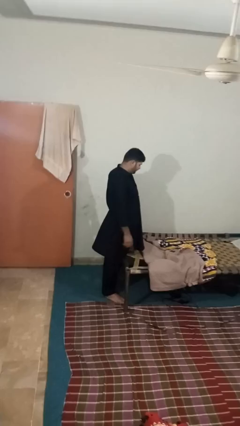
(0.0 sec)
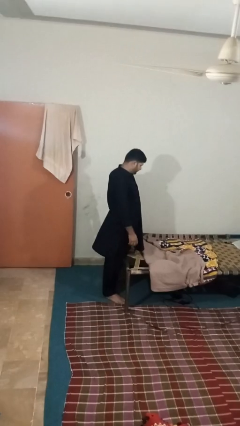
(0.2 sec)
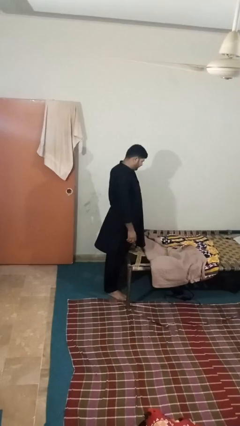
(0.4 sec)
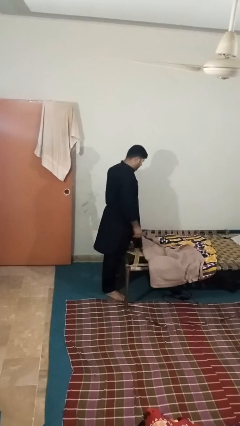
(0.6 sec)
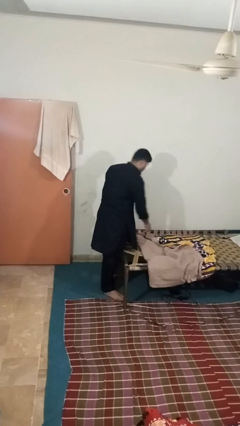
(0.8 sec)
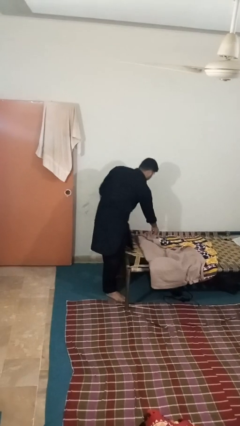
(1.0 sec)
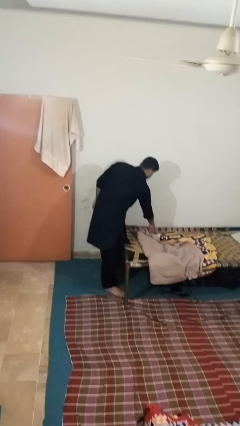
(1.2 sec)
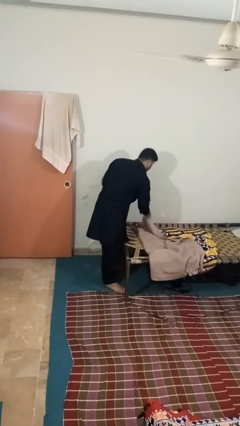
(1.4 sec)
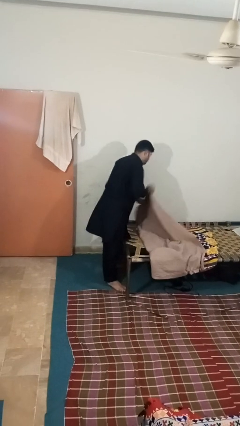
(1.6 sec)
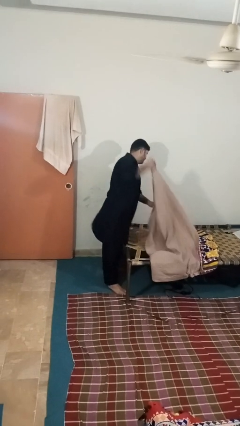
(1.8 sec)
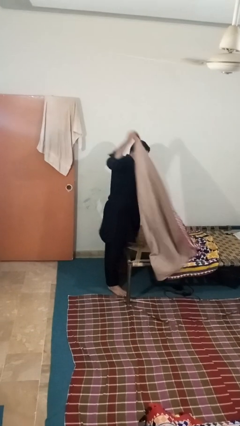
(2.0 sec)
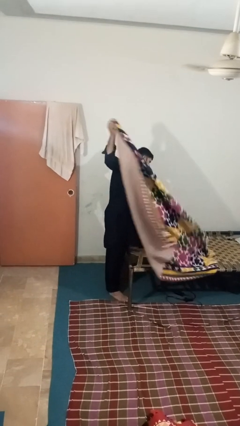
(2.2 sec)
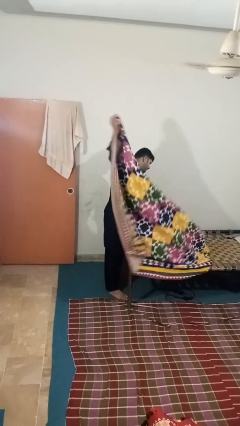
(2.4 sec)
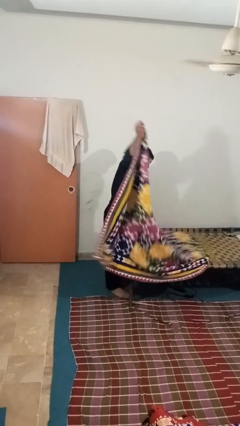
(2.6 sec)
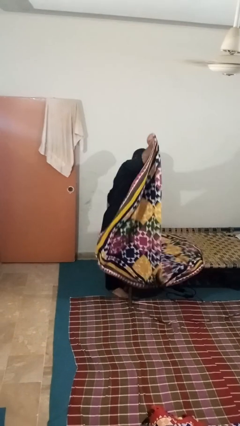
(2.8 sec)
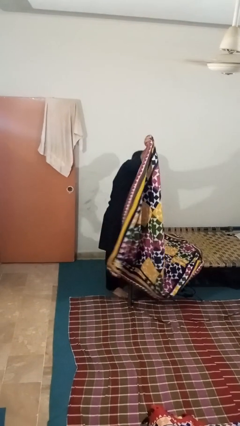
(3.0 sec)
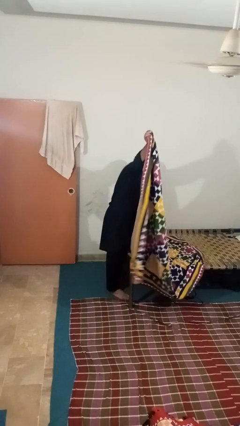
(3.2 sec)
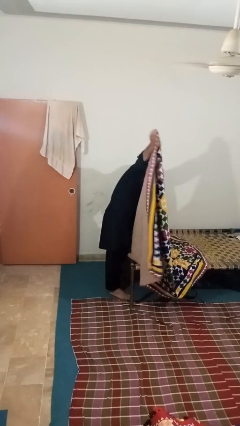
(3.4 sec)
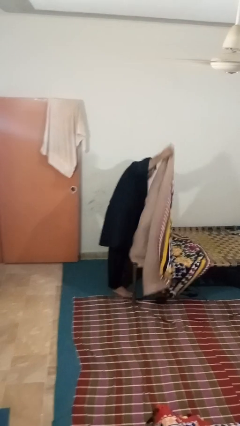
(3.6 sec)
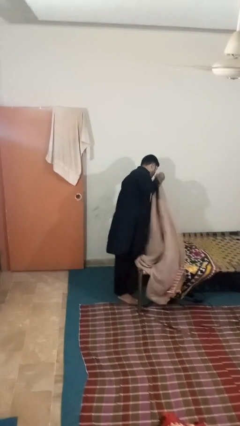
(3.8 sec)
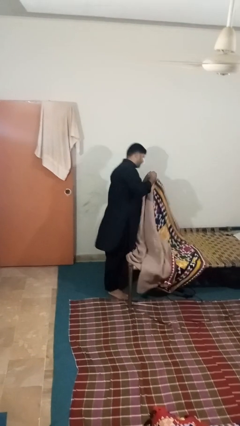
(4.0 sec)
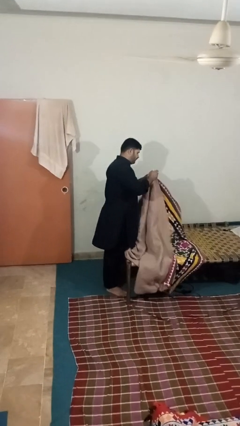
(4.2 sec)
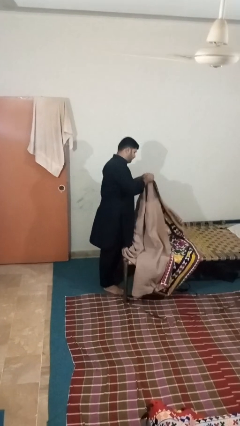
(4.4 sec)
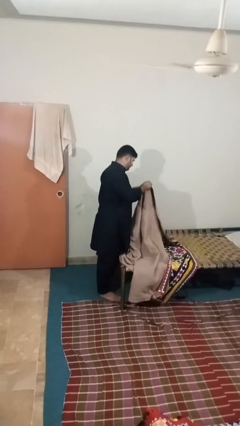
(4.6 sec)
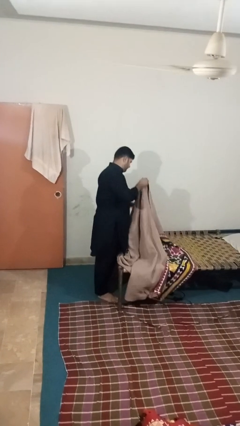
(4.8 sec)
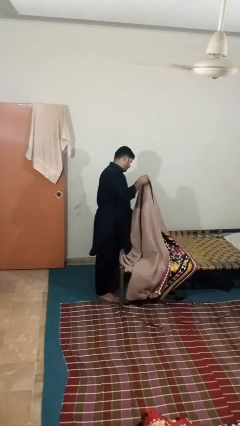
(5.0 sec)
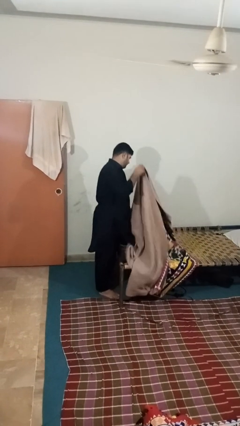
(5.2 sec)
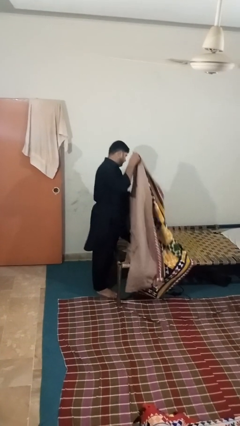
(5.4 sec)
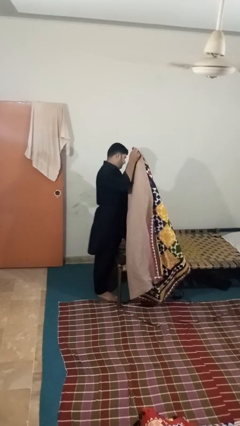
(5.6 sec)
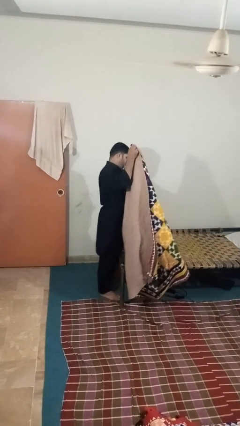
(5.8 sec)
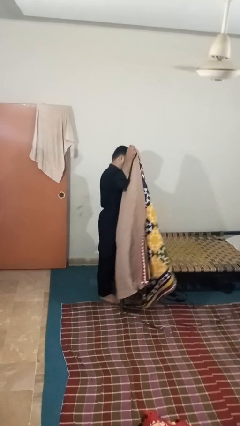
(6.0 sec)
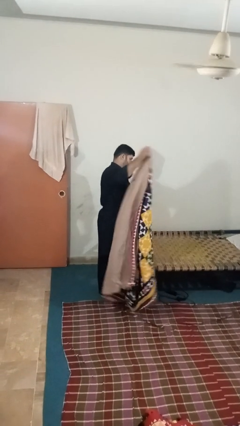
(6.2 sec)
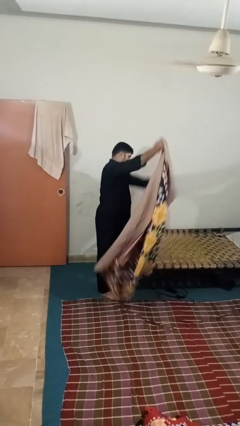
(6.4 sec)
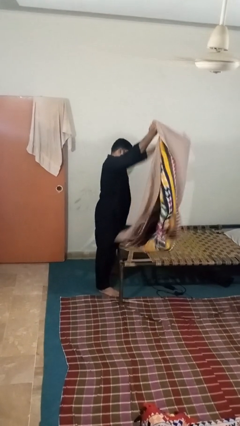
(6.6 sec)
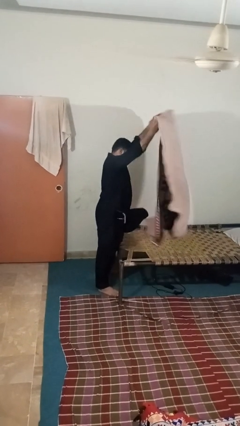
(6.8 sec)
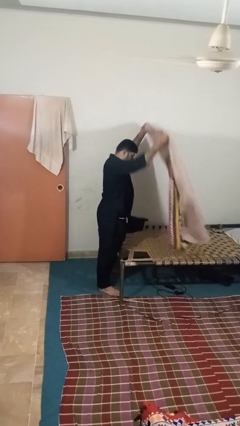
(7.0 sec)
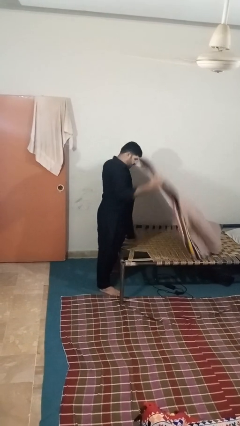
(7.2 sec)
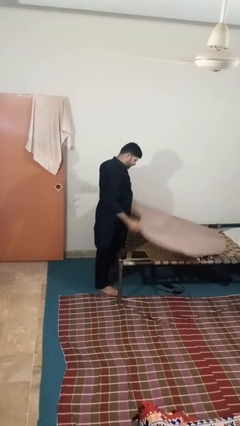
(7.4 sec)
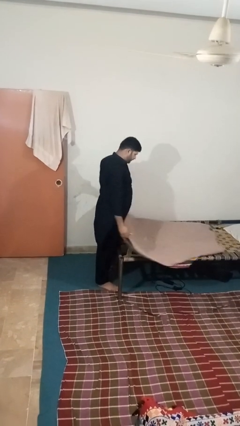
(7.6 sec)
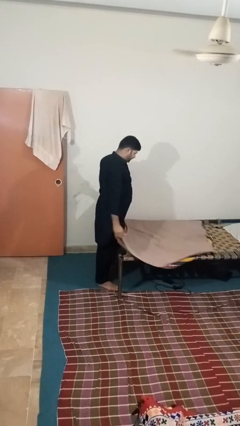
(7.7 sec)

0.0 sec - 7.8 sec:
person folds blanket

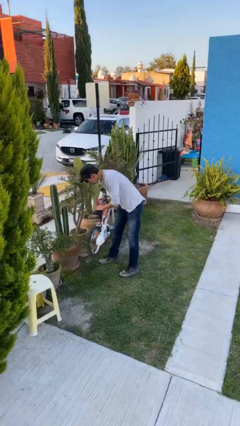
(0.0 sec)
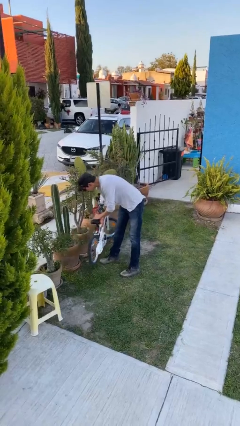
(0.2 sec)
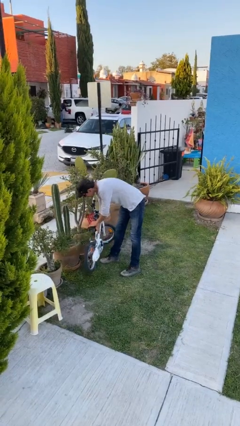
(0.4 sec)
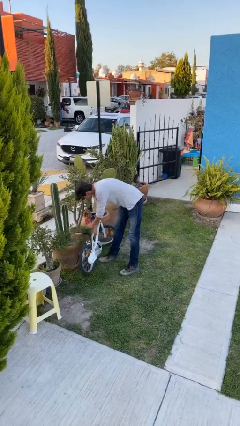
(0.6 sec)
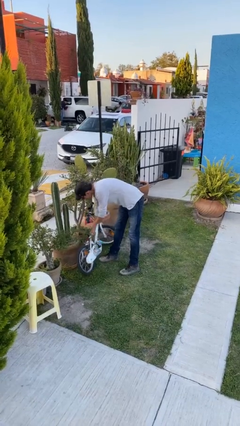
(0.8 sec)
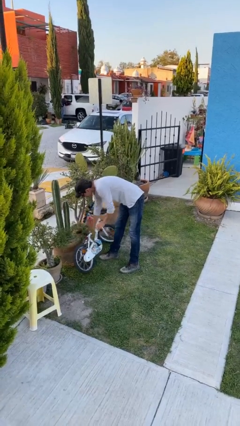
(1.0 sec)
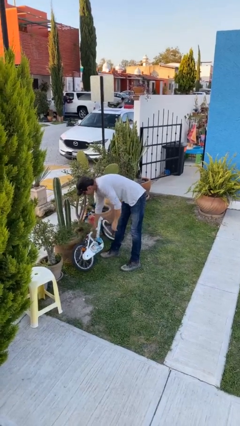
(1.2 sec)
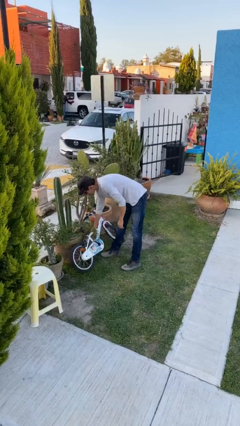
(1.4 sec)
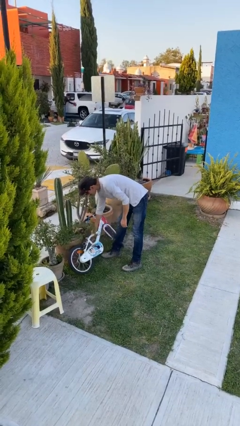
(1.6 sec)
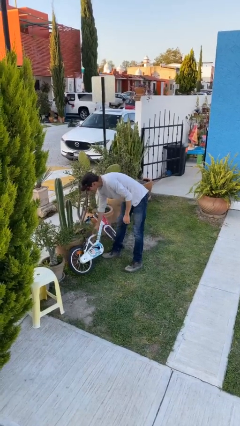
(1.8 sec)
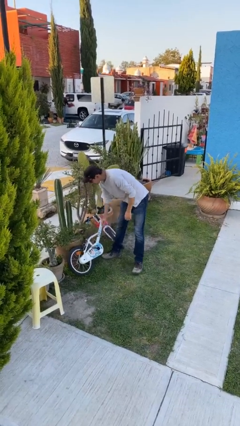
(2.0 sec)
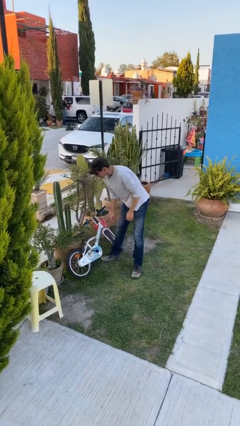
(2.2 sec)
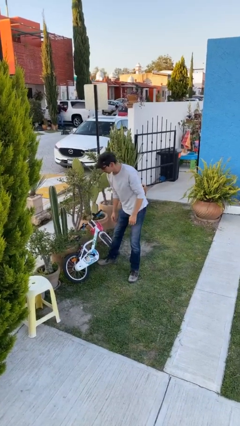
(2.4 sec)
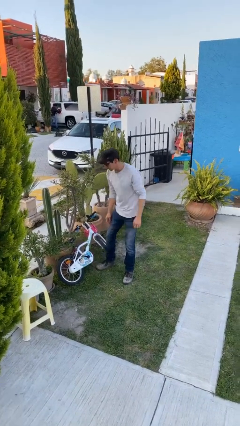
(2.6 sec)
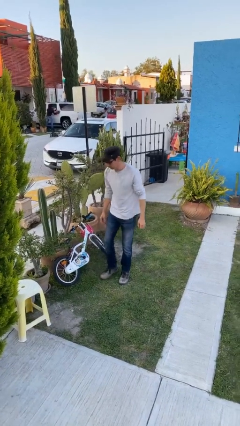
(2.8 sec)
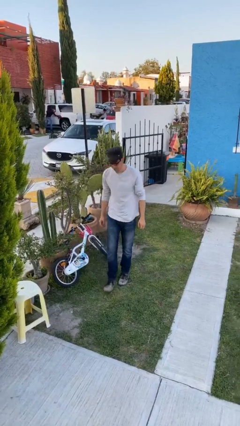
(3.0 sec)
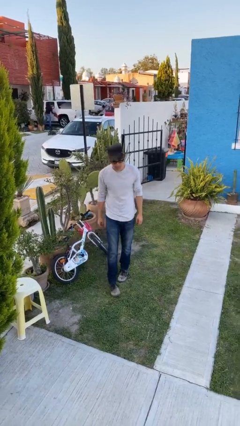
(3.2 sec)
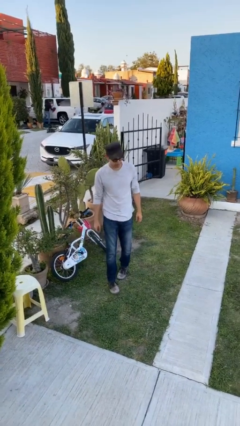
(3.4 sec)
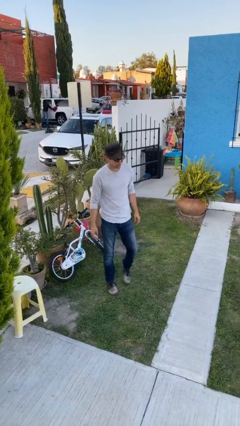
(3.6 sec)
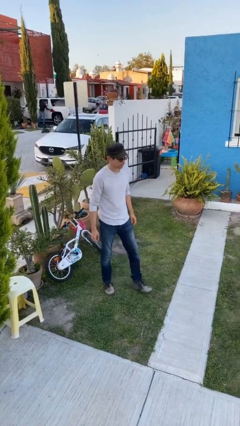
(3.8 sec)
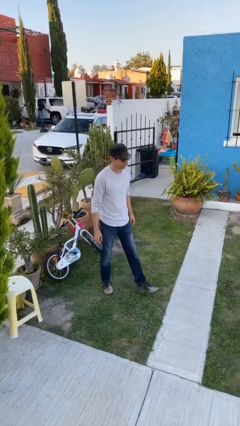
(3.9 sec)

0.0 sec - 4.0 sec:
person puts down object on floor

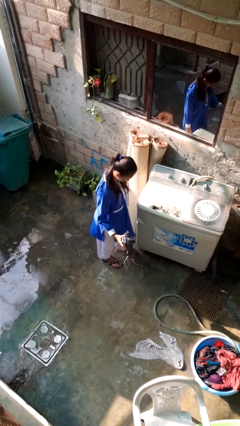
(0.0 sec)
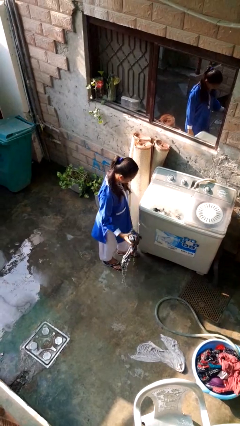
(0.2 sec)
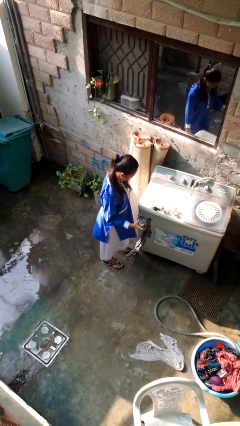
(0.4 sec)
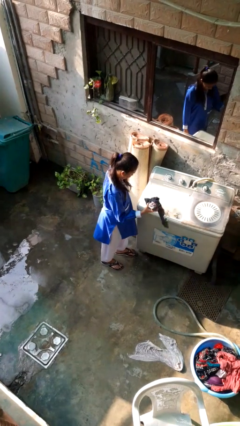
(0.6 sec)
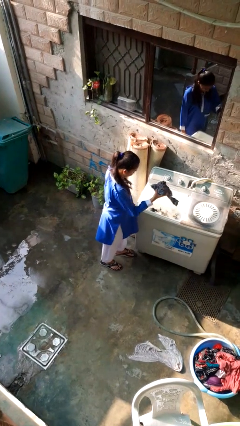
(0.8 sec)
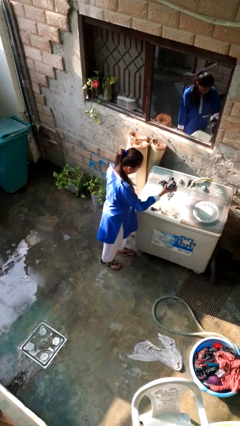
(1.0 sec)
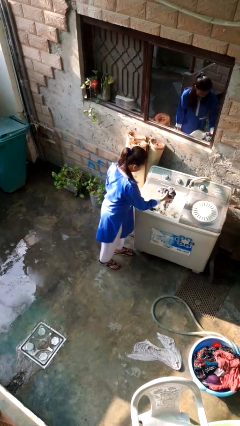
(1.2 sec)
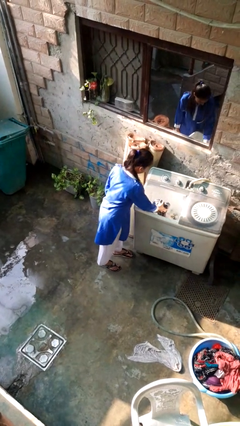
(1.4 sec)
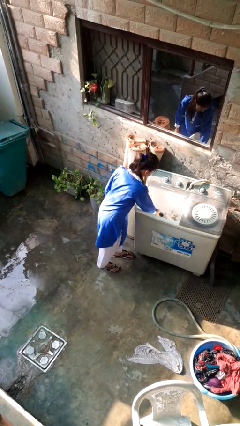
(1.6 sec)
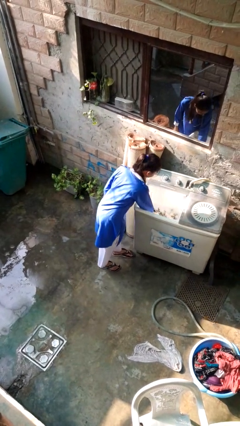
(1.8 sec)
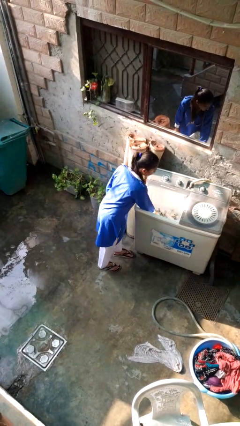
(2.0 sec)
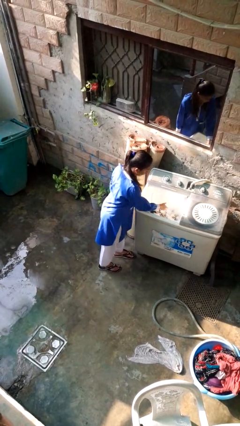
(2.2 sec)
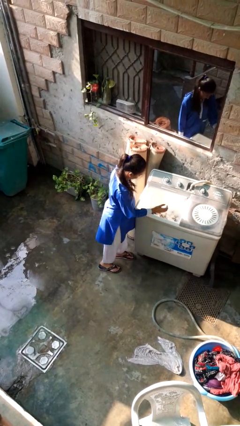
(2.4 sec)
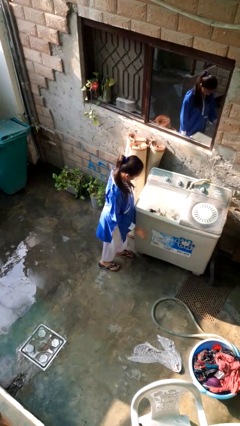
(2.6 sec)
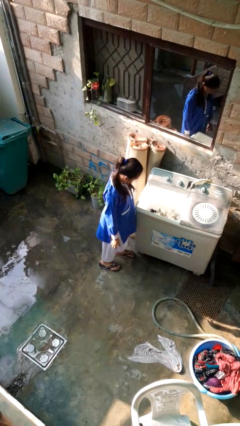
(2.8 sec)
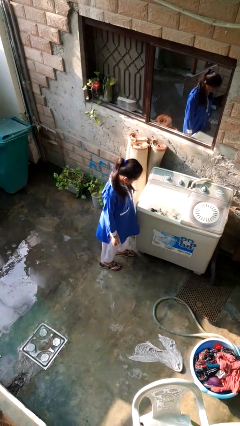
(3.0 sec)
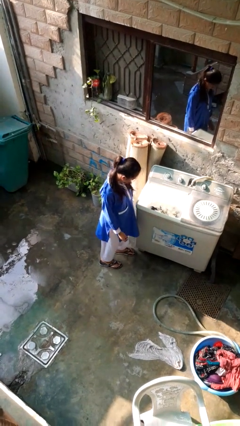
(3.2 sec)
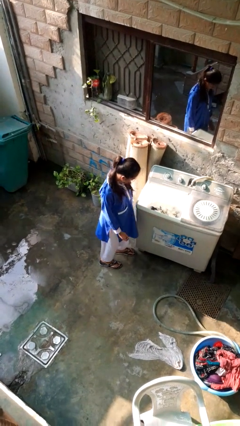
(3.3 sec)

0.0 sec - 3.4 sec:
person loads clotheswasher

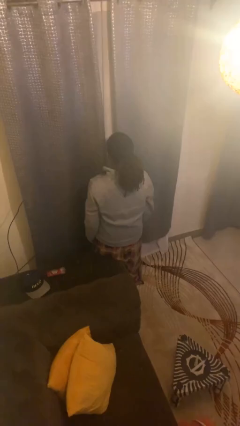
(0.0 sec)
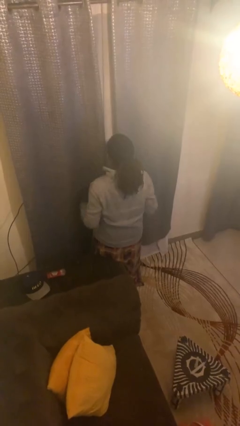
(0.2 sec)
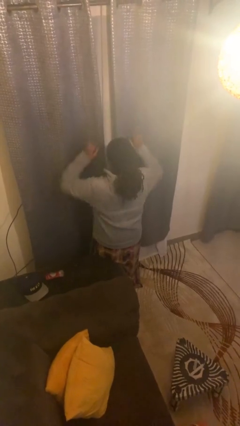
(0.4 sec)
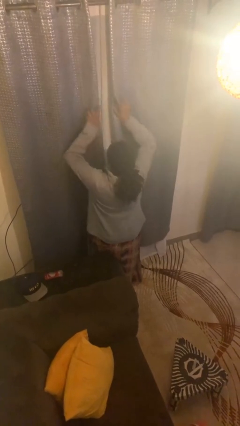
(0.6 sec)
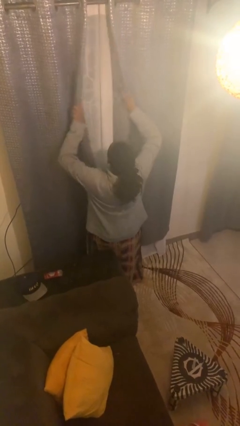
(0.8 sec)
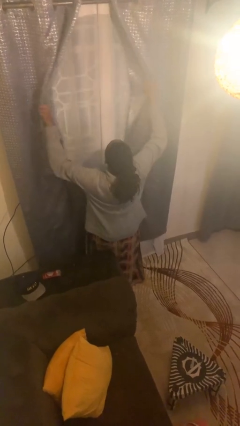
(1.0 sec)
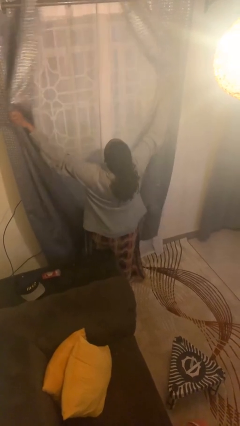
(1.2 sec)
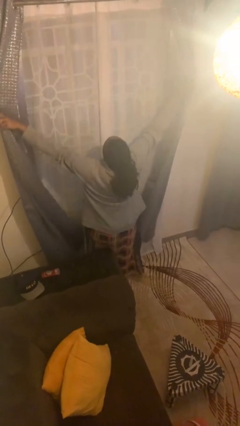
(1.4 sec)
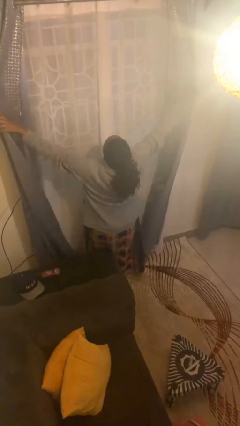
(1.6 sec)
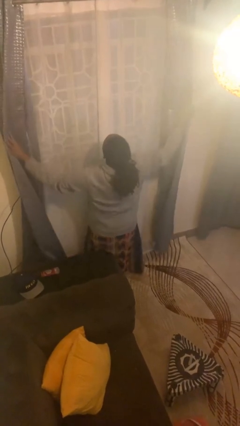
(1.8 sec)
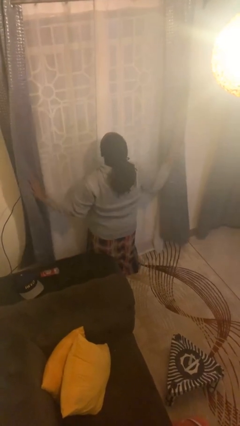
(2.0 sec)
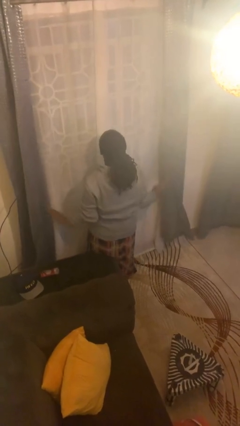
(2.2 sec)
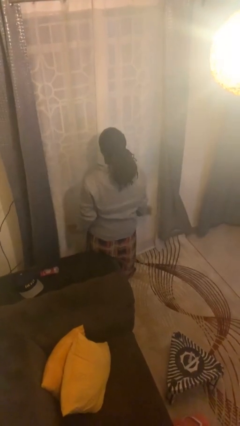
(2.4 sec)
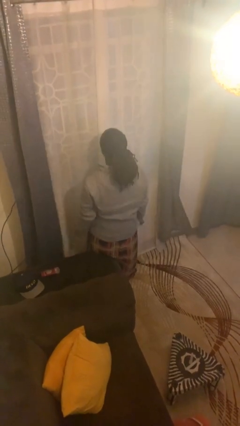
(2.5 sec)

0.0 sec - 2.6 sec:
person opens curtains
